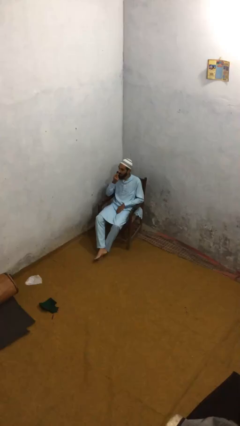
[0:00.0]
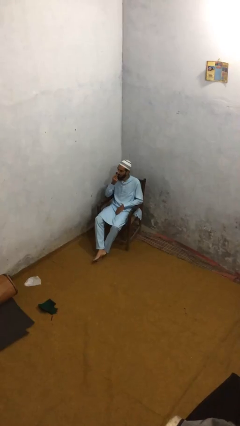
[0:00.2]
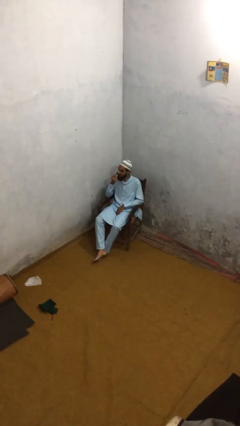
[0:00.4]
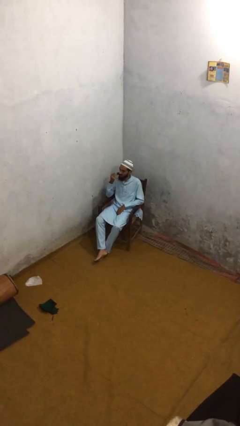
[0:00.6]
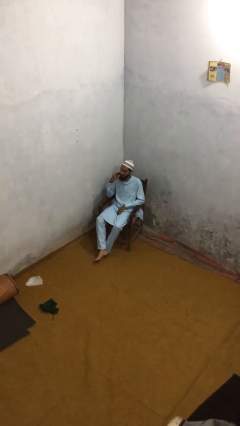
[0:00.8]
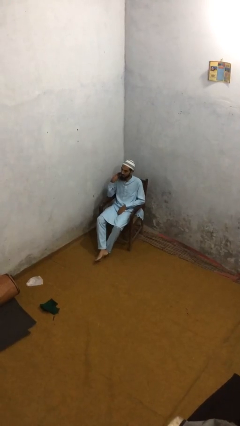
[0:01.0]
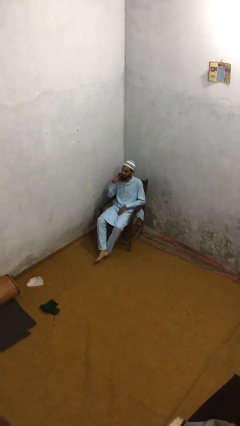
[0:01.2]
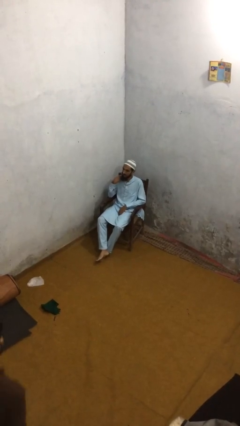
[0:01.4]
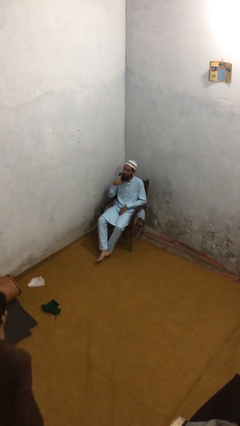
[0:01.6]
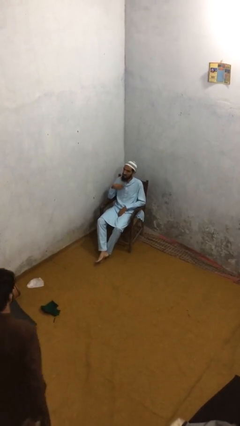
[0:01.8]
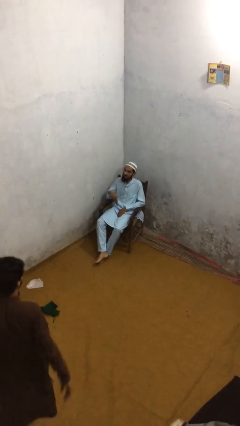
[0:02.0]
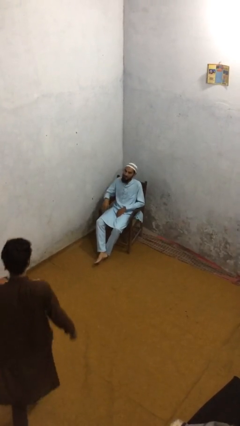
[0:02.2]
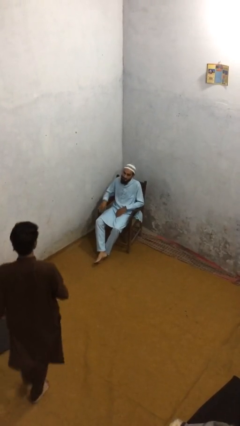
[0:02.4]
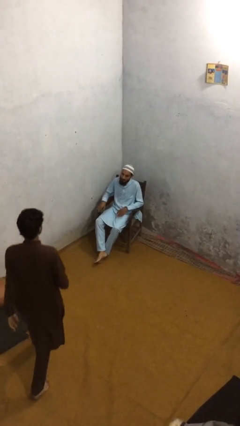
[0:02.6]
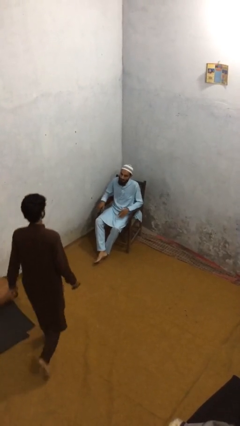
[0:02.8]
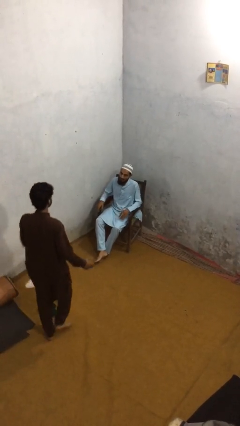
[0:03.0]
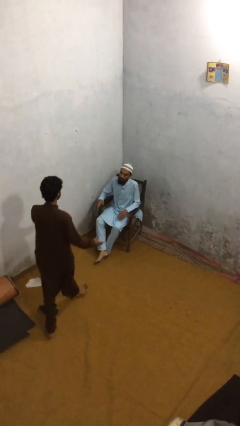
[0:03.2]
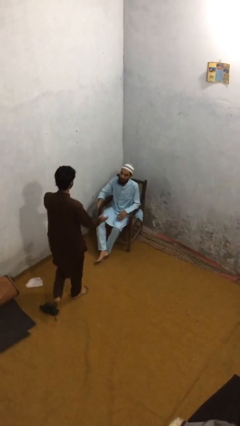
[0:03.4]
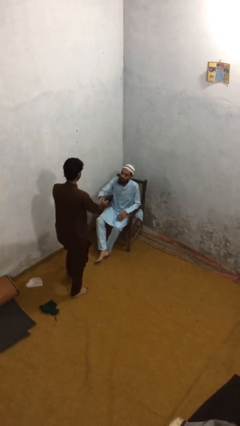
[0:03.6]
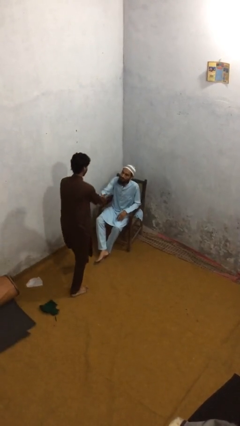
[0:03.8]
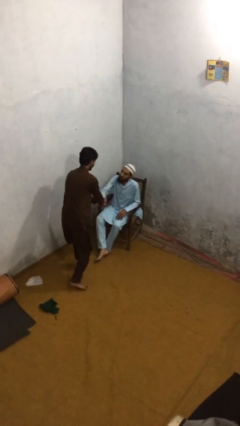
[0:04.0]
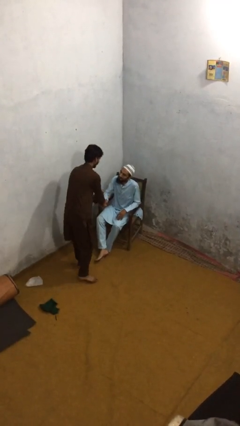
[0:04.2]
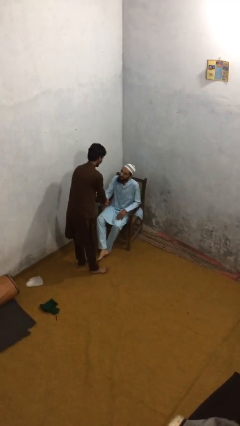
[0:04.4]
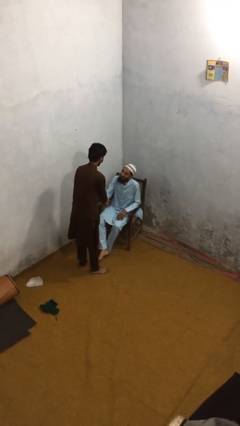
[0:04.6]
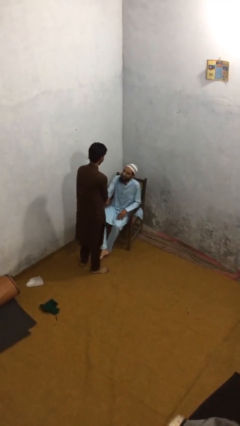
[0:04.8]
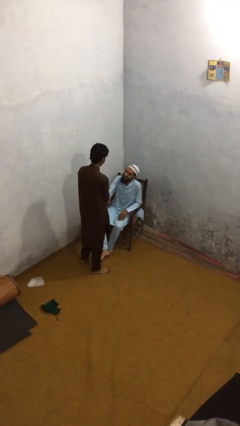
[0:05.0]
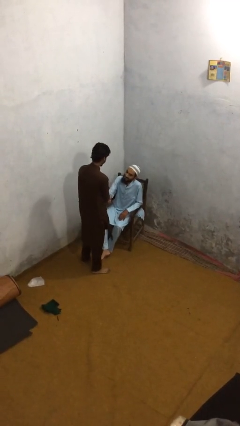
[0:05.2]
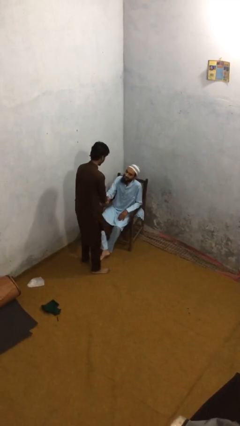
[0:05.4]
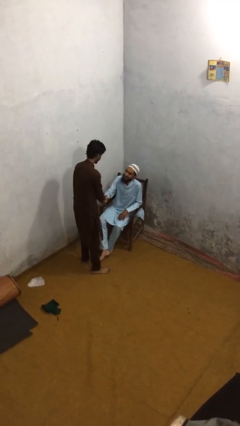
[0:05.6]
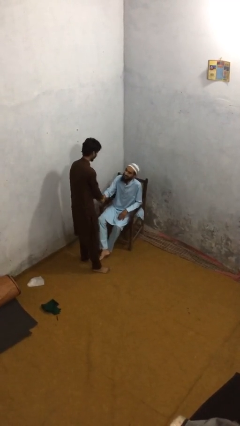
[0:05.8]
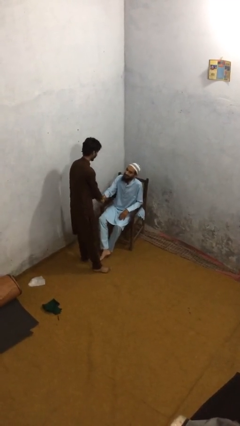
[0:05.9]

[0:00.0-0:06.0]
person shakes hand

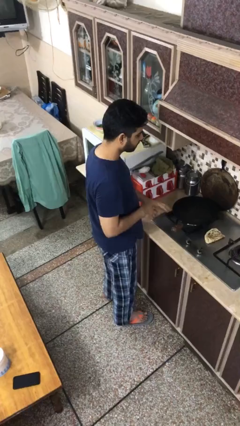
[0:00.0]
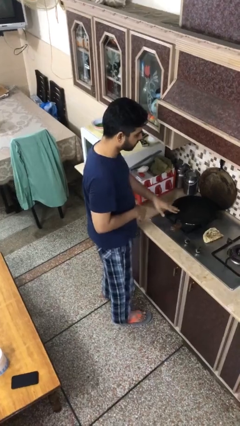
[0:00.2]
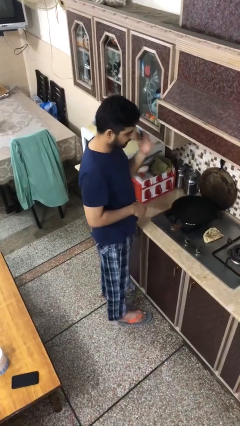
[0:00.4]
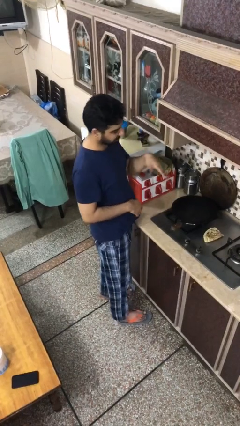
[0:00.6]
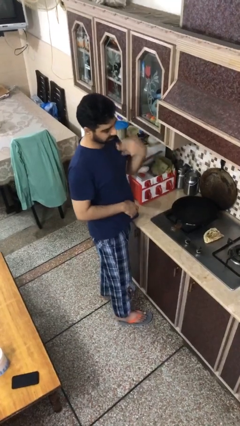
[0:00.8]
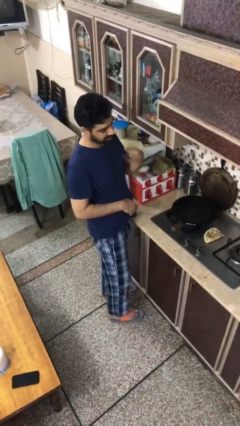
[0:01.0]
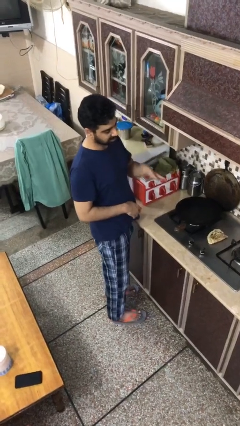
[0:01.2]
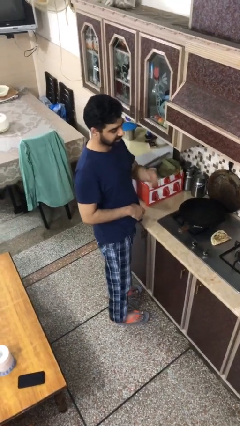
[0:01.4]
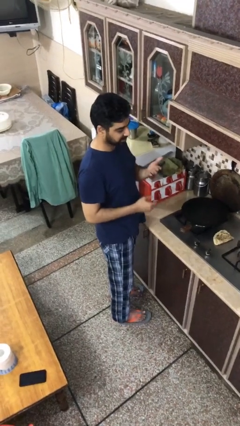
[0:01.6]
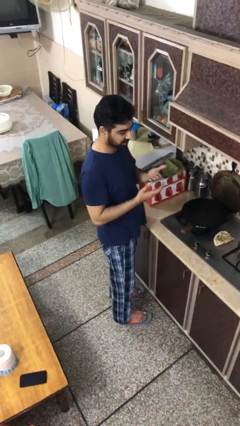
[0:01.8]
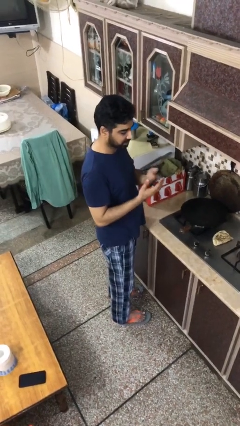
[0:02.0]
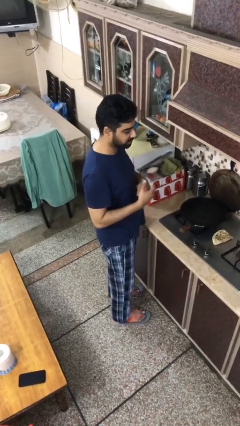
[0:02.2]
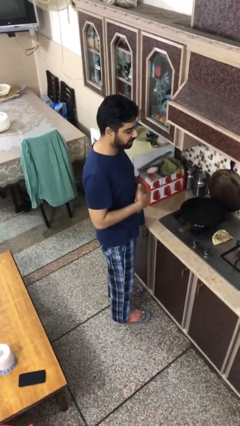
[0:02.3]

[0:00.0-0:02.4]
person burns hand

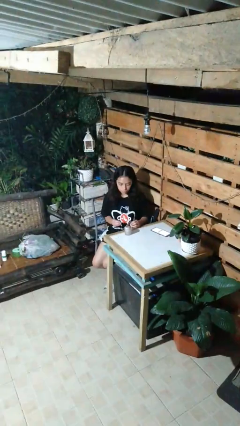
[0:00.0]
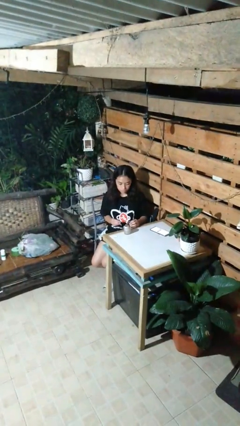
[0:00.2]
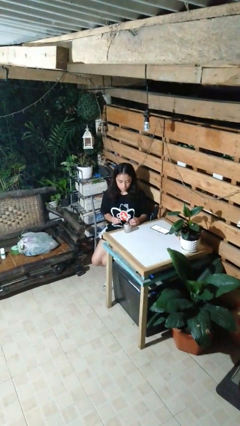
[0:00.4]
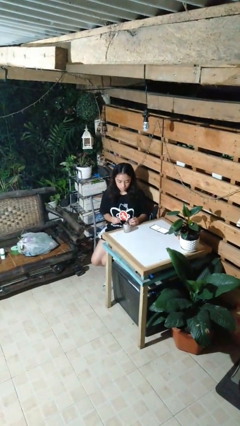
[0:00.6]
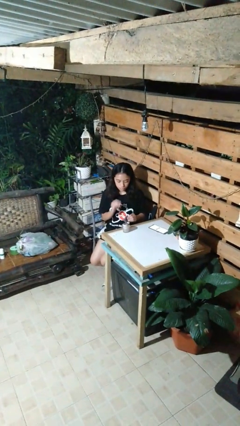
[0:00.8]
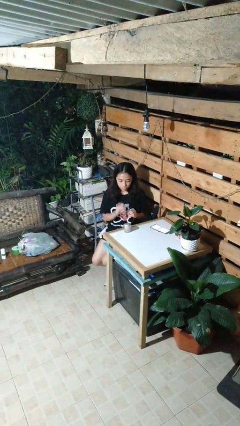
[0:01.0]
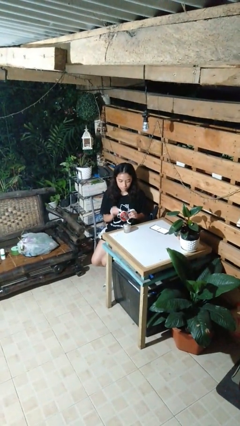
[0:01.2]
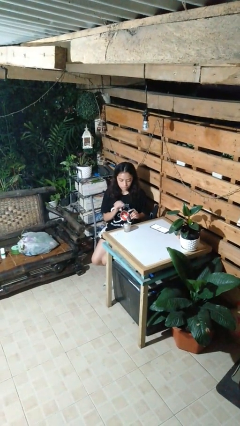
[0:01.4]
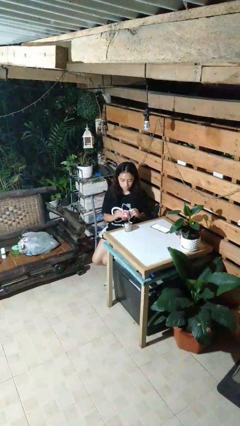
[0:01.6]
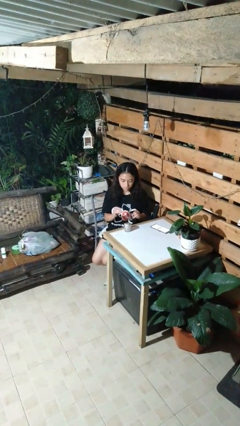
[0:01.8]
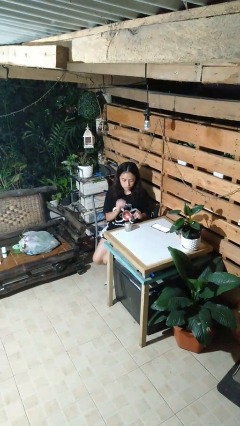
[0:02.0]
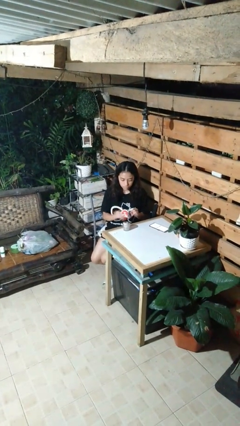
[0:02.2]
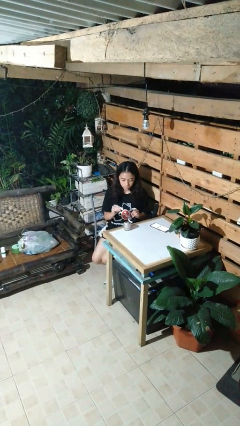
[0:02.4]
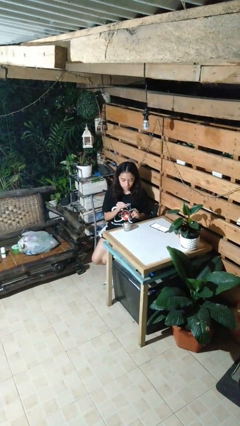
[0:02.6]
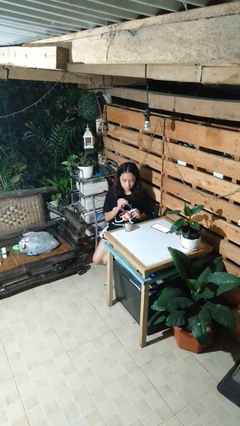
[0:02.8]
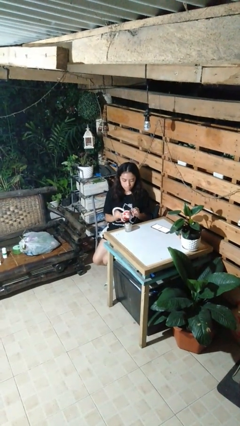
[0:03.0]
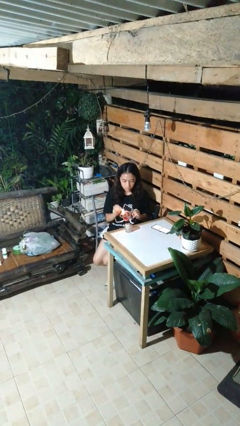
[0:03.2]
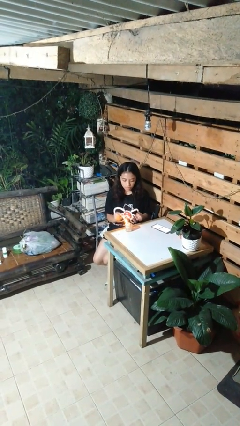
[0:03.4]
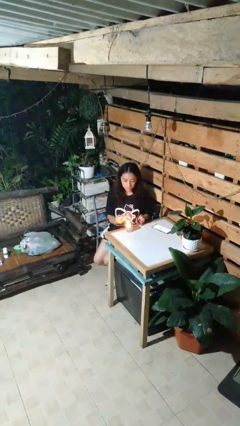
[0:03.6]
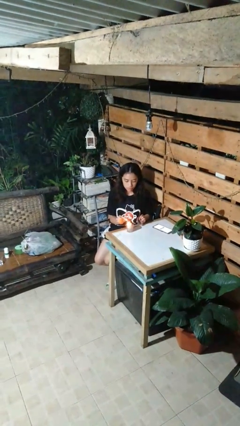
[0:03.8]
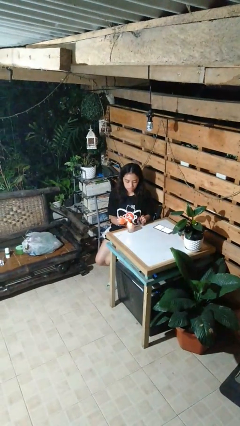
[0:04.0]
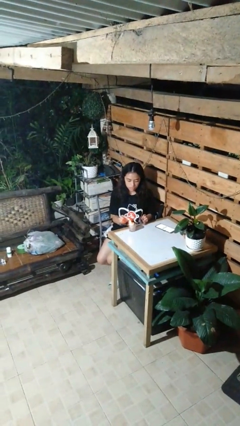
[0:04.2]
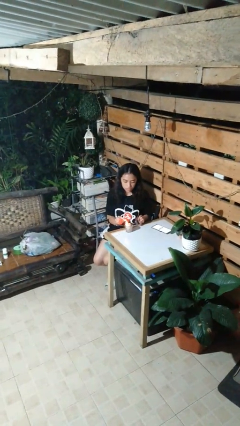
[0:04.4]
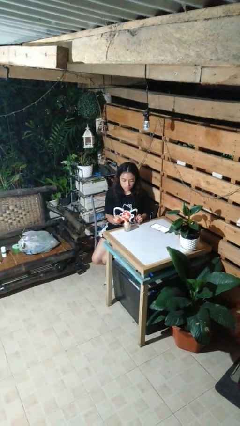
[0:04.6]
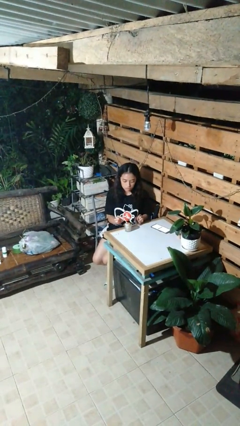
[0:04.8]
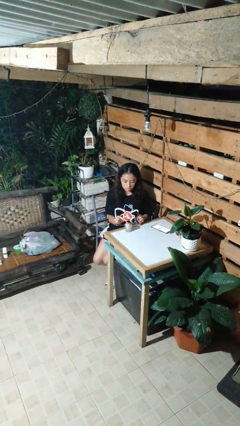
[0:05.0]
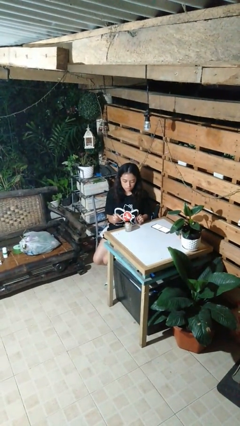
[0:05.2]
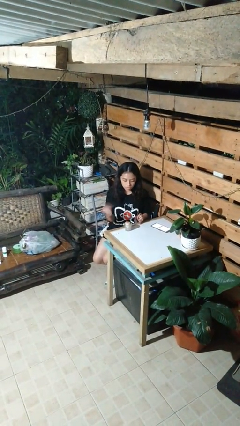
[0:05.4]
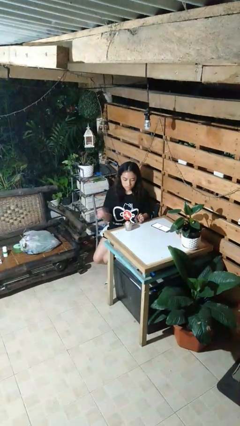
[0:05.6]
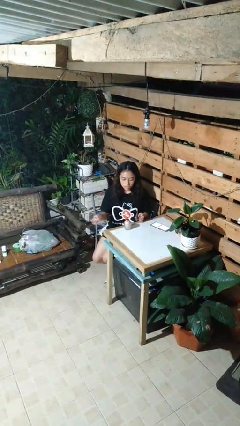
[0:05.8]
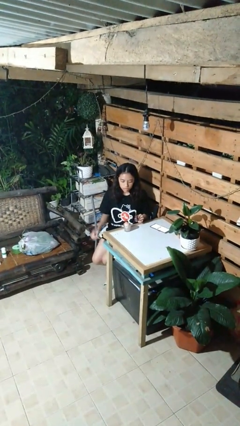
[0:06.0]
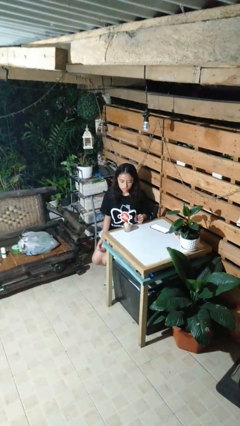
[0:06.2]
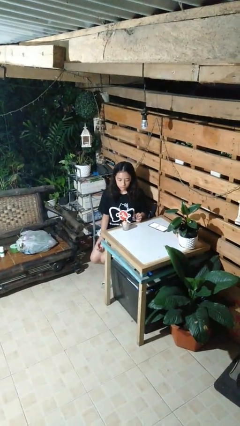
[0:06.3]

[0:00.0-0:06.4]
person lights candle

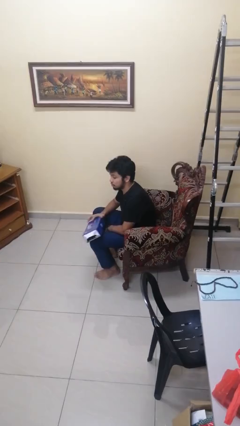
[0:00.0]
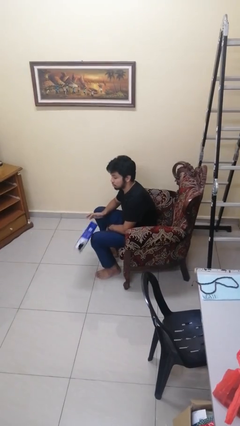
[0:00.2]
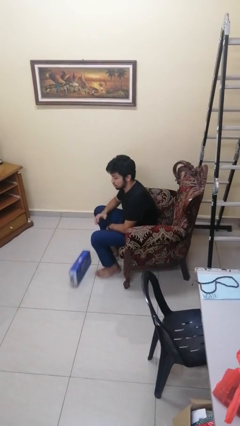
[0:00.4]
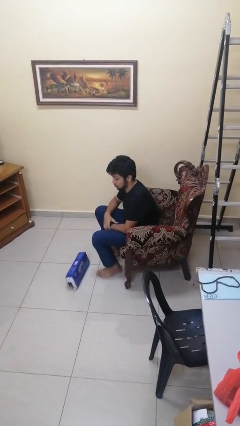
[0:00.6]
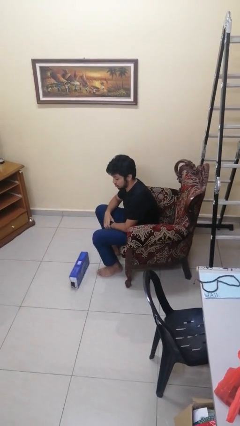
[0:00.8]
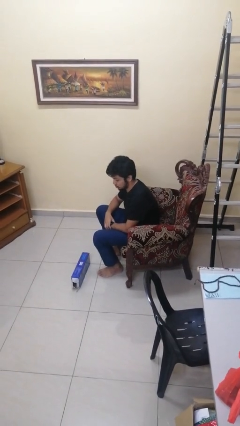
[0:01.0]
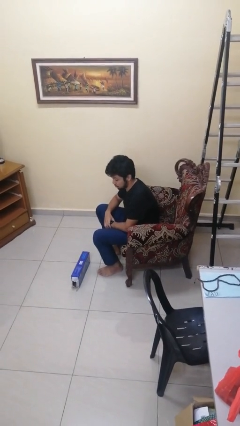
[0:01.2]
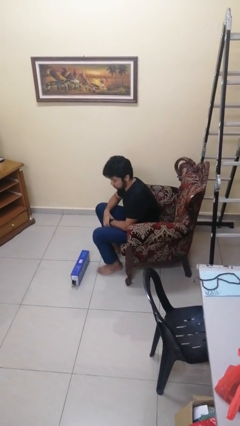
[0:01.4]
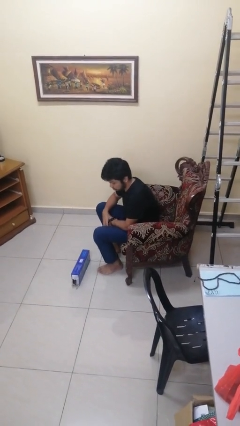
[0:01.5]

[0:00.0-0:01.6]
person drops object

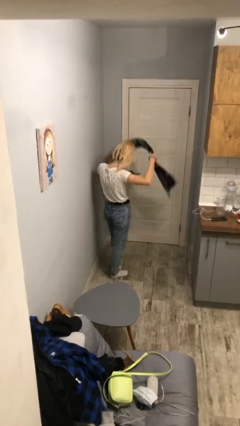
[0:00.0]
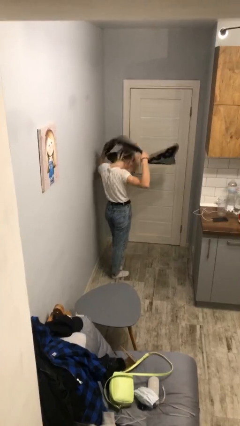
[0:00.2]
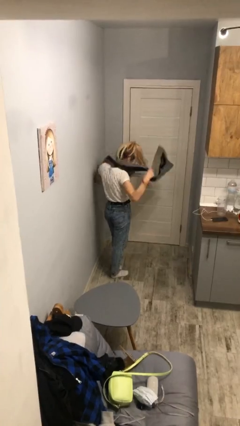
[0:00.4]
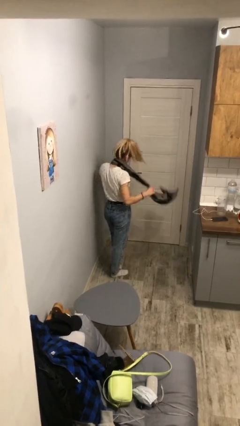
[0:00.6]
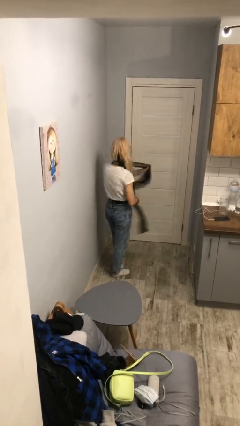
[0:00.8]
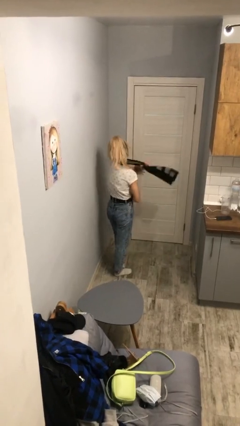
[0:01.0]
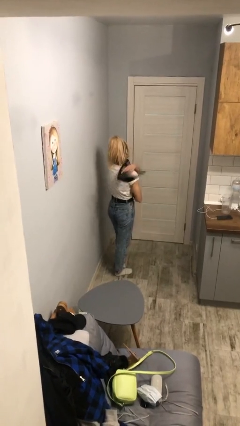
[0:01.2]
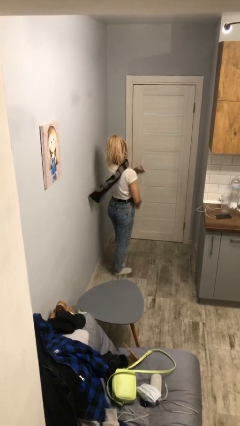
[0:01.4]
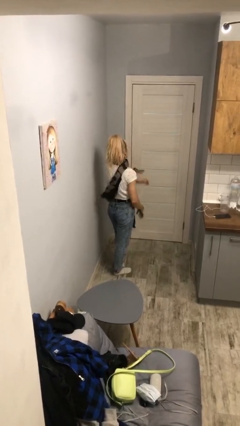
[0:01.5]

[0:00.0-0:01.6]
person puts on scarf
